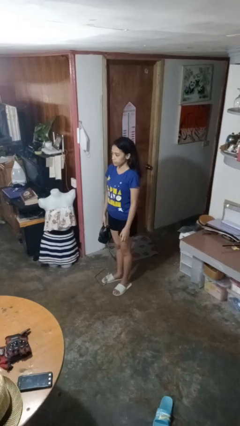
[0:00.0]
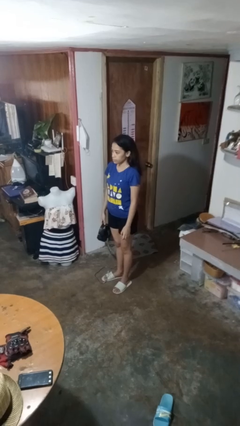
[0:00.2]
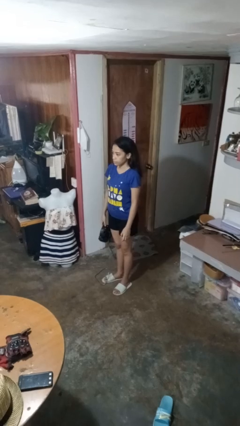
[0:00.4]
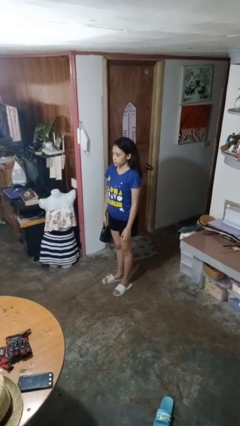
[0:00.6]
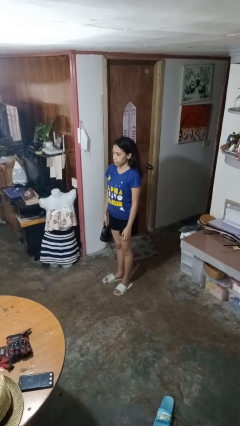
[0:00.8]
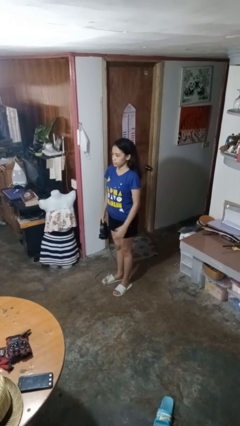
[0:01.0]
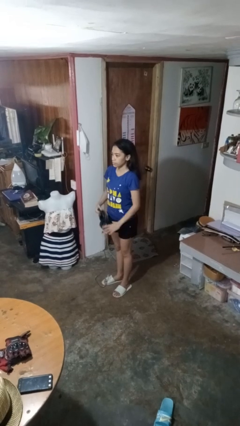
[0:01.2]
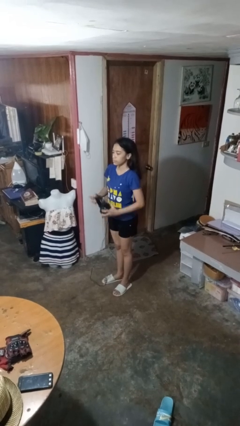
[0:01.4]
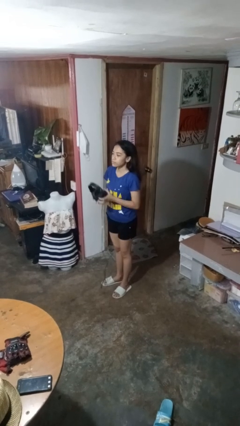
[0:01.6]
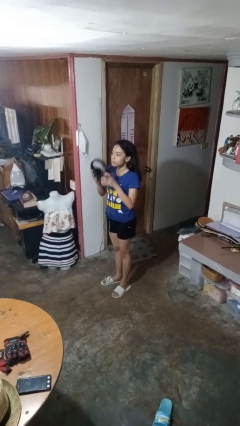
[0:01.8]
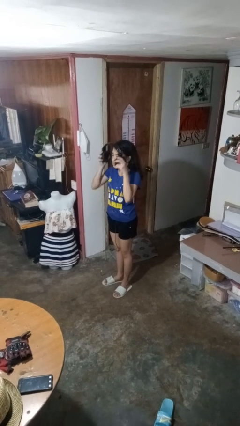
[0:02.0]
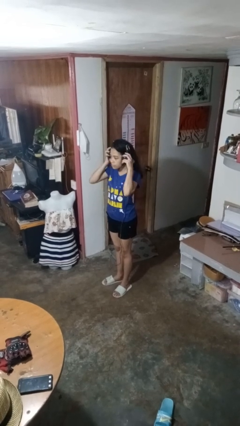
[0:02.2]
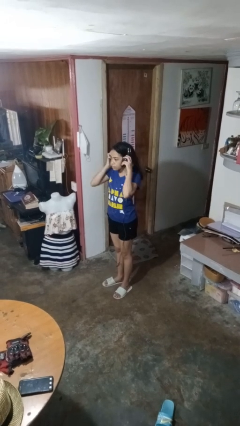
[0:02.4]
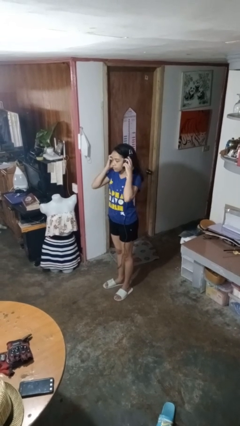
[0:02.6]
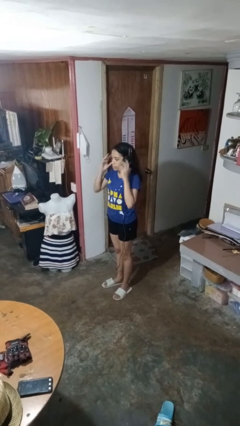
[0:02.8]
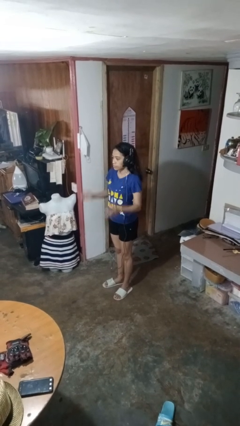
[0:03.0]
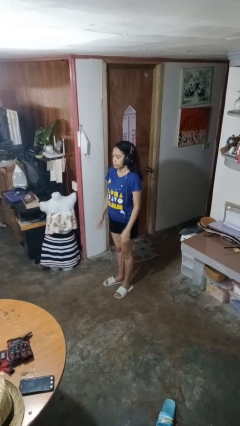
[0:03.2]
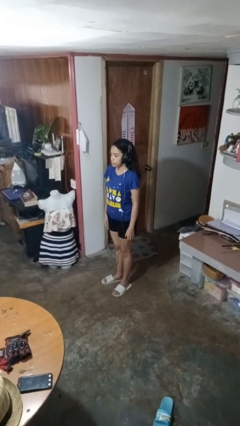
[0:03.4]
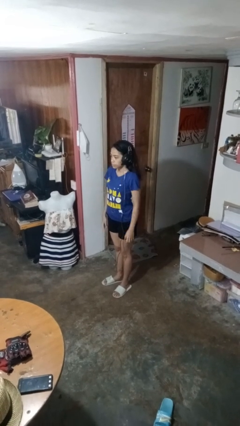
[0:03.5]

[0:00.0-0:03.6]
person puts on headphones

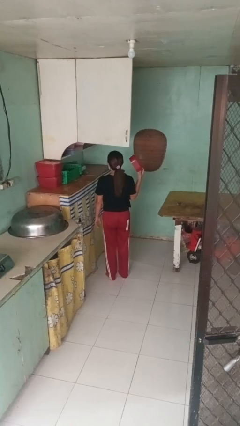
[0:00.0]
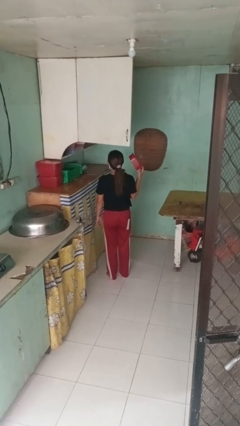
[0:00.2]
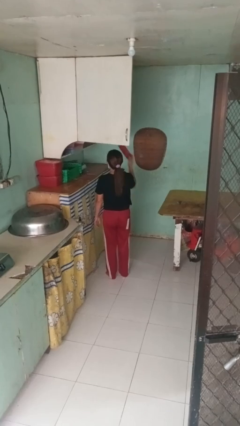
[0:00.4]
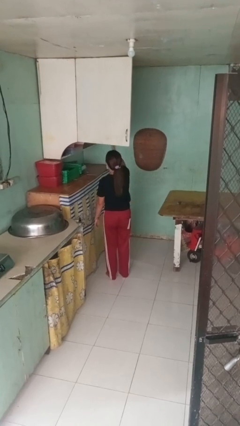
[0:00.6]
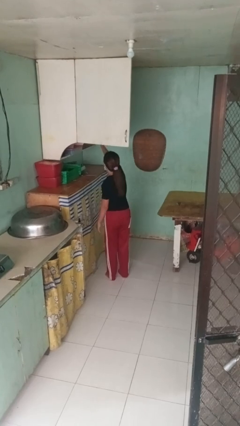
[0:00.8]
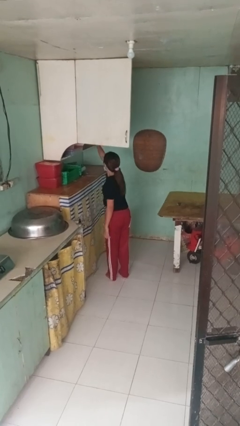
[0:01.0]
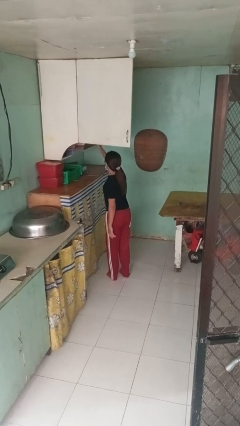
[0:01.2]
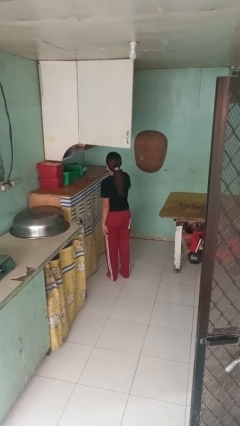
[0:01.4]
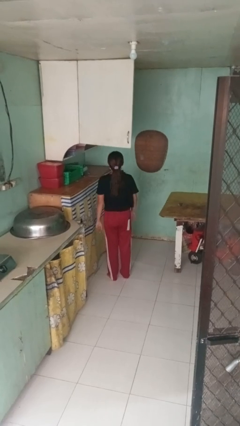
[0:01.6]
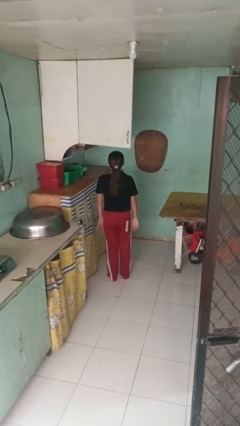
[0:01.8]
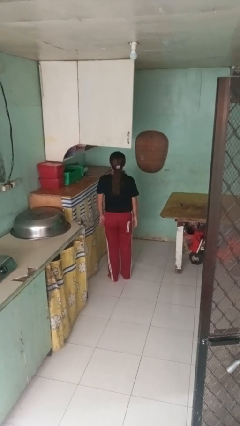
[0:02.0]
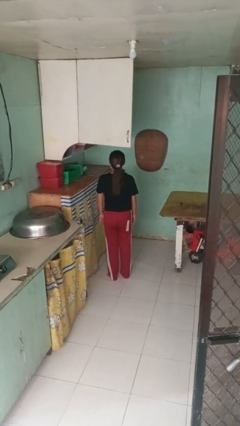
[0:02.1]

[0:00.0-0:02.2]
person puts object in cabinet

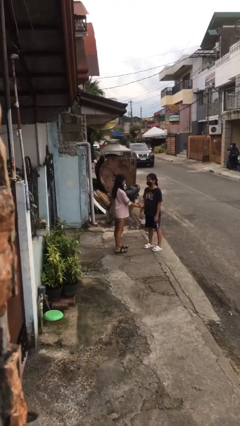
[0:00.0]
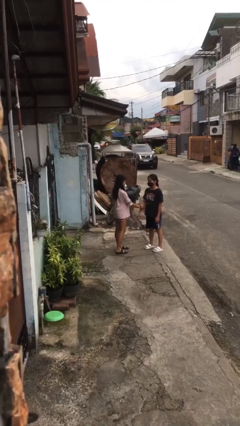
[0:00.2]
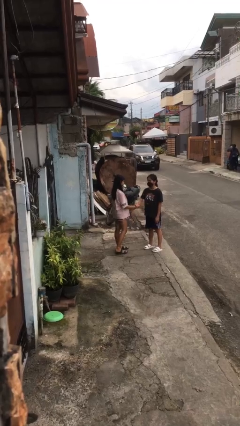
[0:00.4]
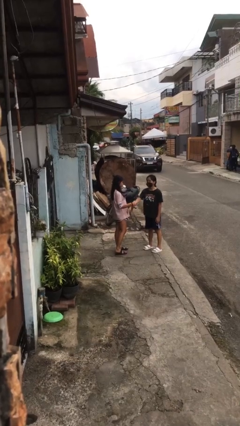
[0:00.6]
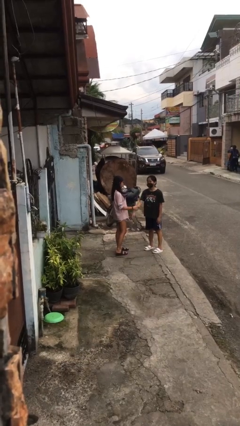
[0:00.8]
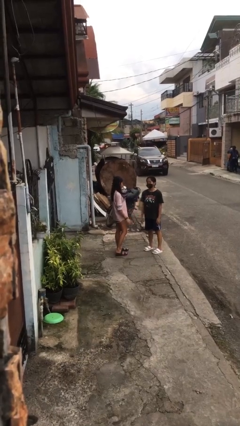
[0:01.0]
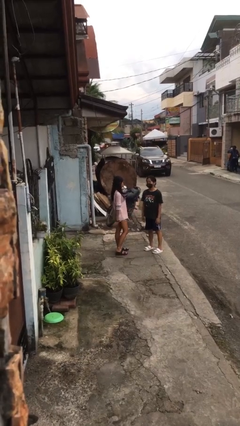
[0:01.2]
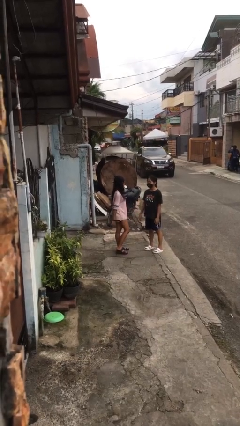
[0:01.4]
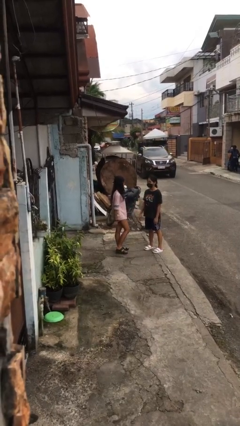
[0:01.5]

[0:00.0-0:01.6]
person grabs person by forearm

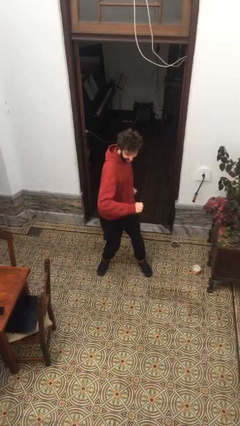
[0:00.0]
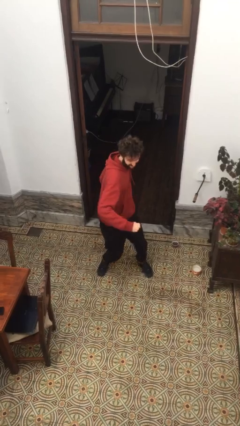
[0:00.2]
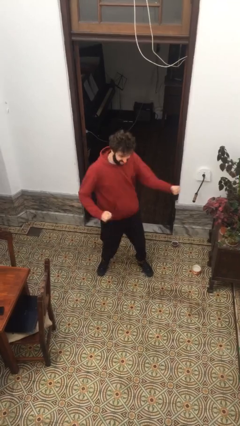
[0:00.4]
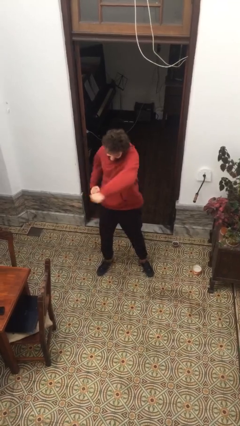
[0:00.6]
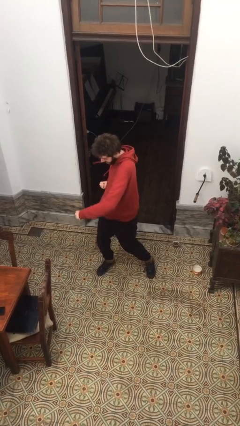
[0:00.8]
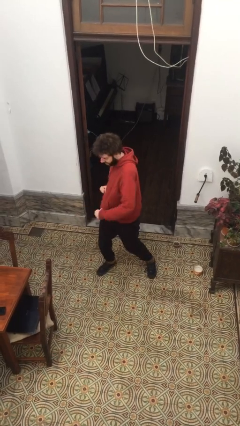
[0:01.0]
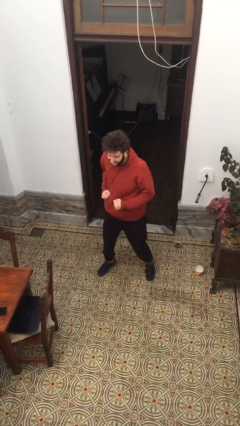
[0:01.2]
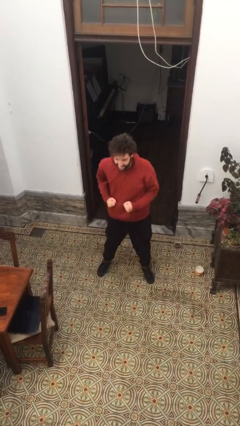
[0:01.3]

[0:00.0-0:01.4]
person punches

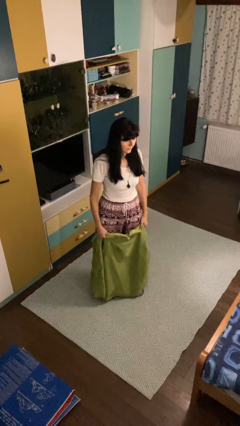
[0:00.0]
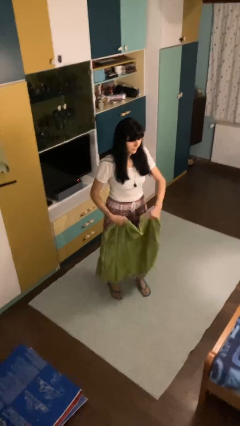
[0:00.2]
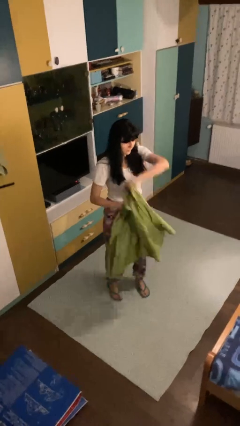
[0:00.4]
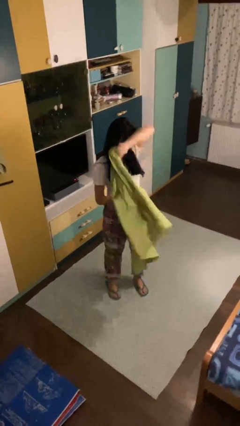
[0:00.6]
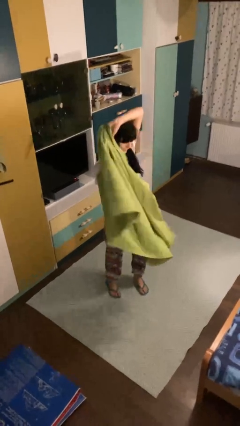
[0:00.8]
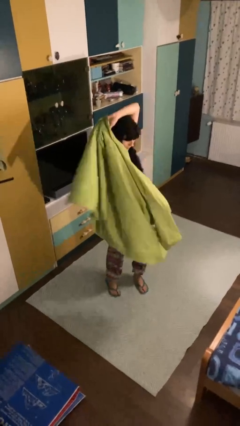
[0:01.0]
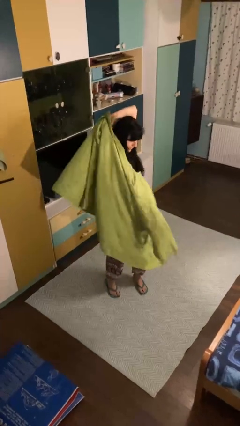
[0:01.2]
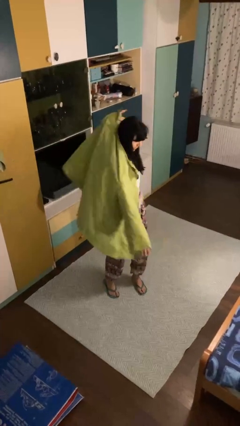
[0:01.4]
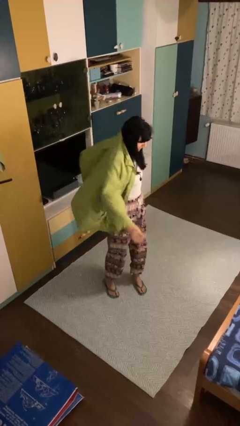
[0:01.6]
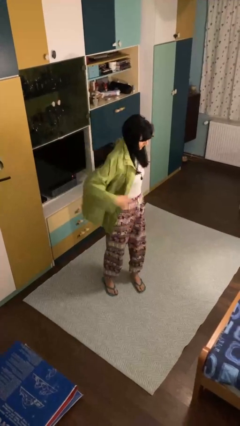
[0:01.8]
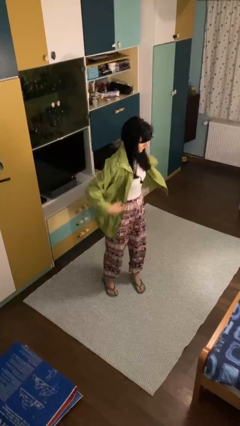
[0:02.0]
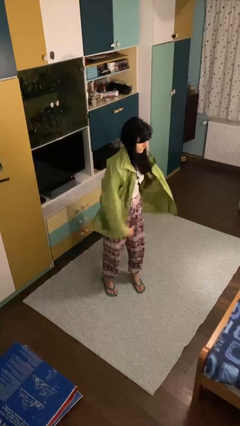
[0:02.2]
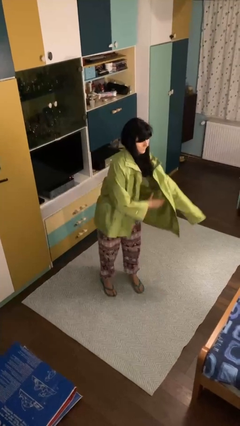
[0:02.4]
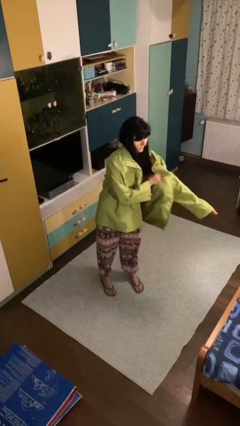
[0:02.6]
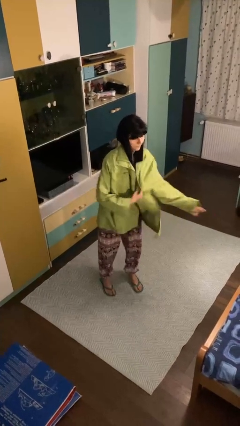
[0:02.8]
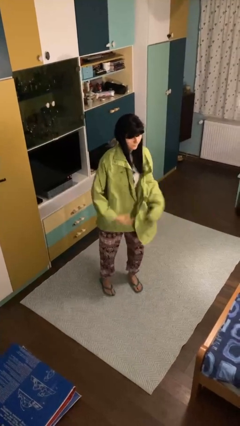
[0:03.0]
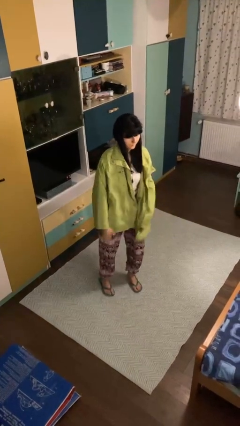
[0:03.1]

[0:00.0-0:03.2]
person puts on jacket

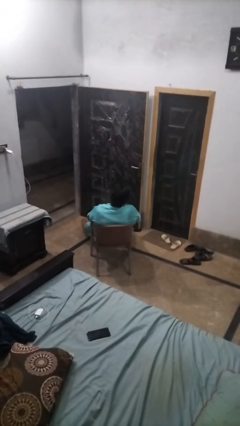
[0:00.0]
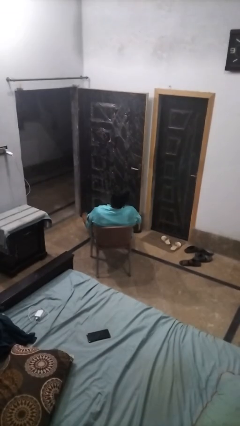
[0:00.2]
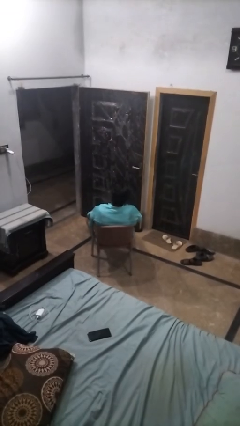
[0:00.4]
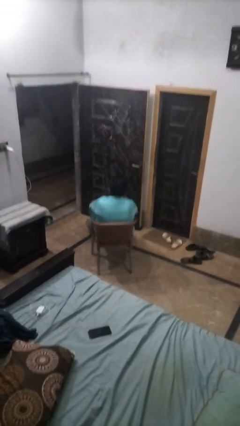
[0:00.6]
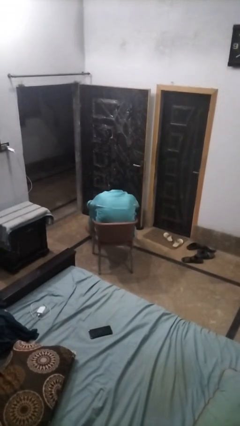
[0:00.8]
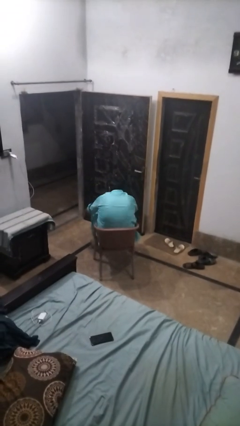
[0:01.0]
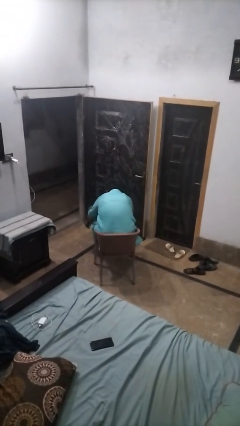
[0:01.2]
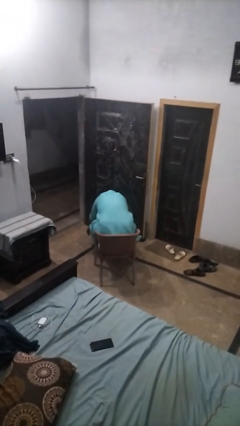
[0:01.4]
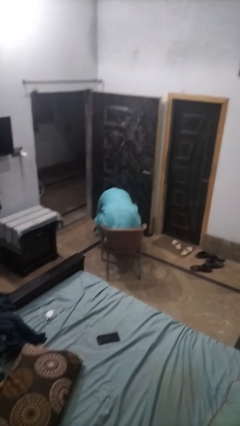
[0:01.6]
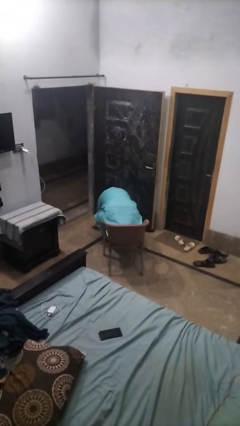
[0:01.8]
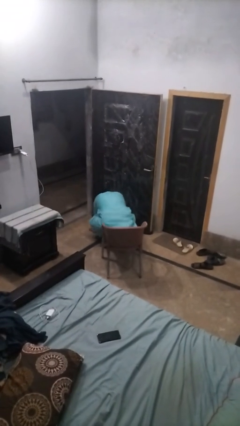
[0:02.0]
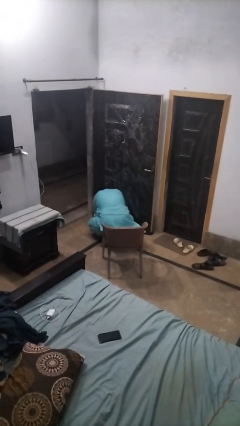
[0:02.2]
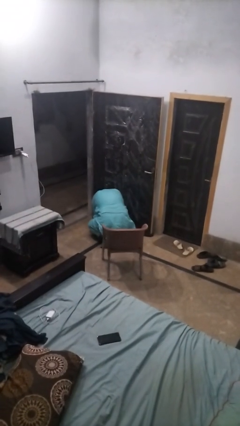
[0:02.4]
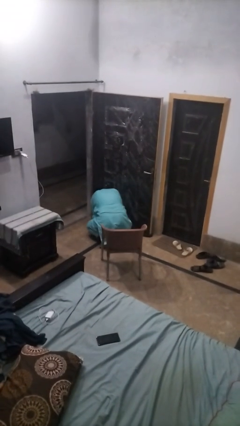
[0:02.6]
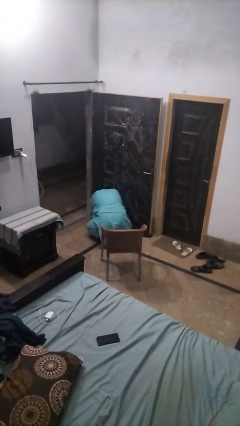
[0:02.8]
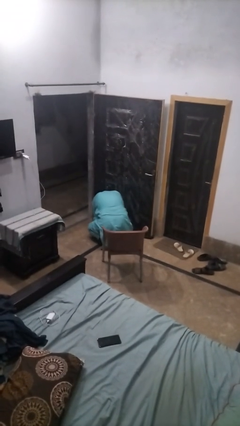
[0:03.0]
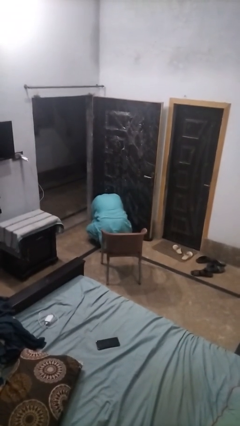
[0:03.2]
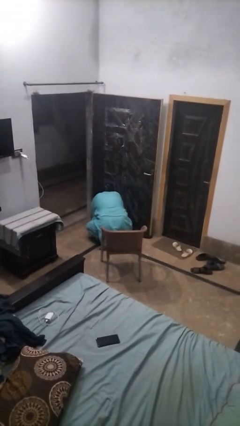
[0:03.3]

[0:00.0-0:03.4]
person falls from chair

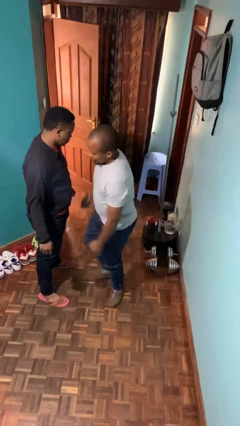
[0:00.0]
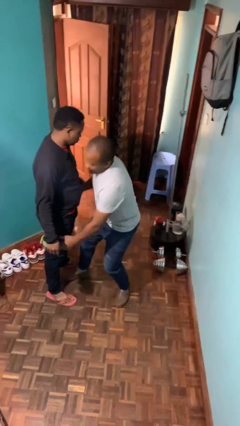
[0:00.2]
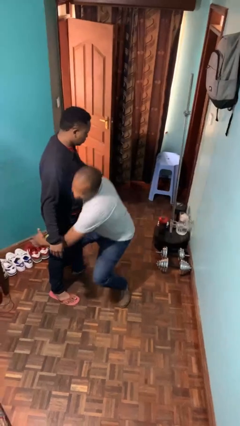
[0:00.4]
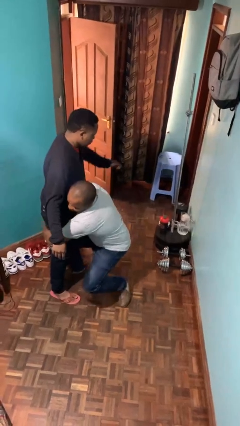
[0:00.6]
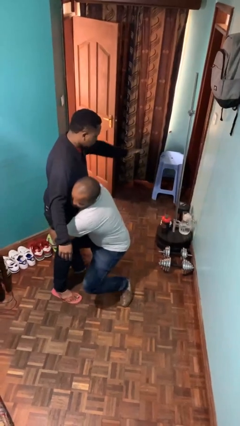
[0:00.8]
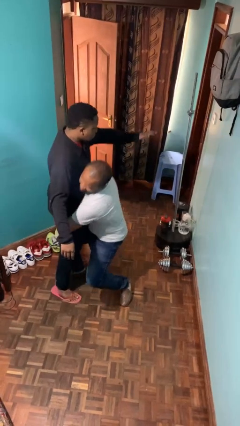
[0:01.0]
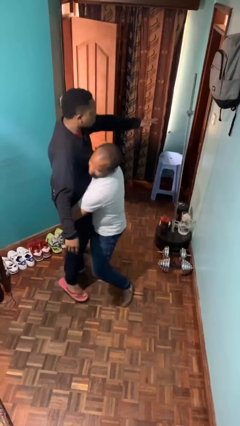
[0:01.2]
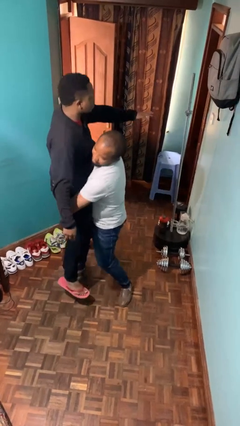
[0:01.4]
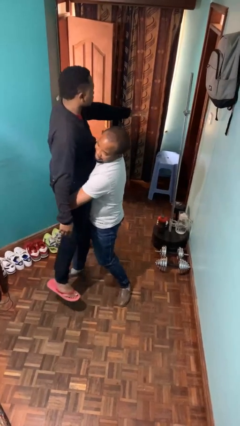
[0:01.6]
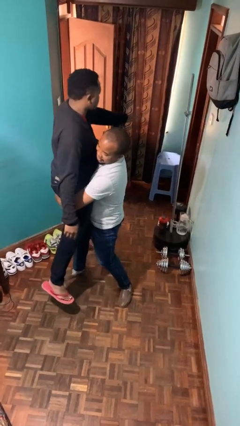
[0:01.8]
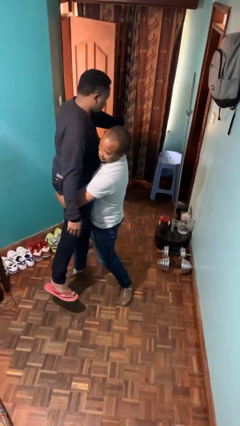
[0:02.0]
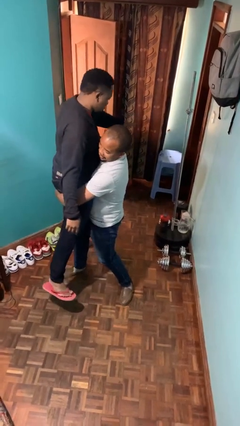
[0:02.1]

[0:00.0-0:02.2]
person picks up person

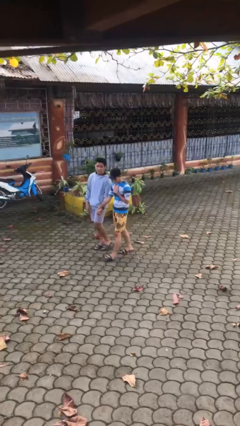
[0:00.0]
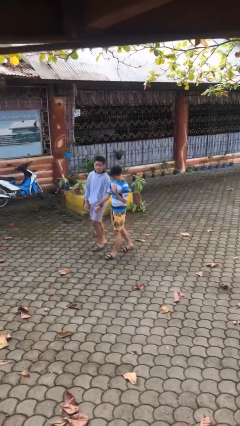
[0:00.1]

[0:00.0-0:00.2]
person holds hand
